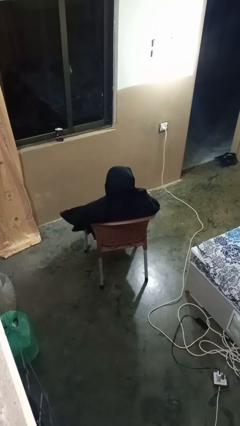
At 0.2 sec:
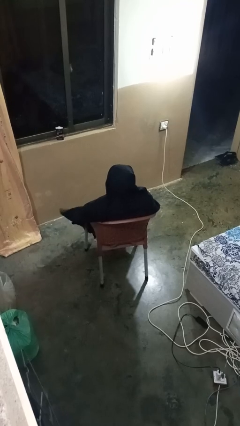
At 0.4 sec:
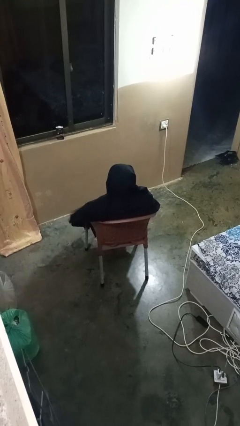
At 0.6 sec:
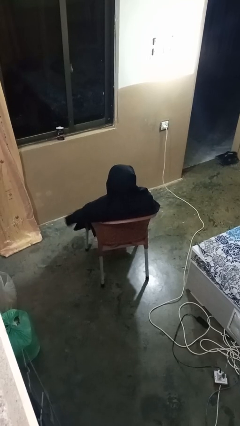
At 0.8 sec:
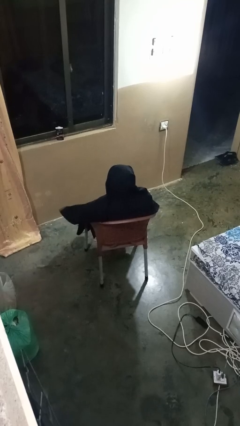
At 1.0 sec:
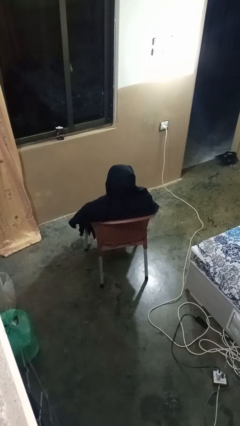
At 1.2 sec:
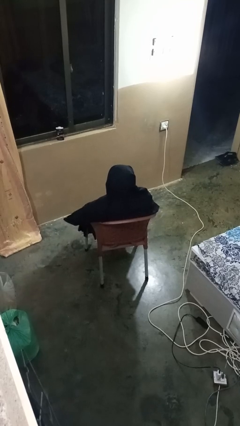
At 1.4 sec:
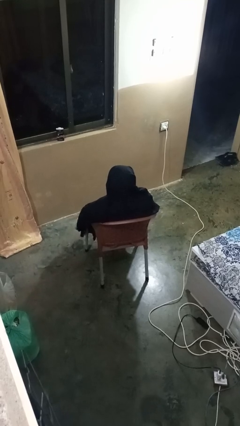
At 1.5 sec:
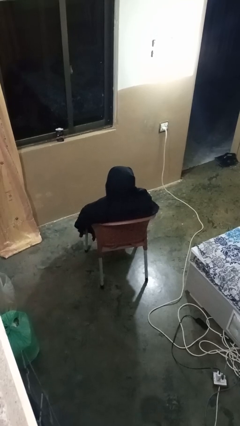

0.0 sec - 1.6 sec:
person gestures lower hand

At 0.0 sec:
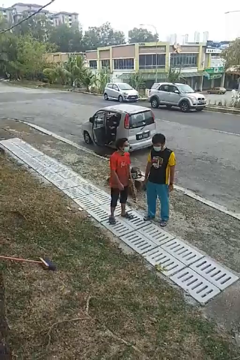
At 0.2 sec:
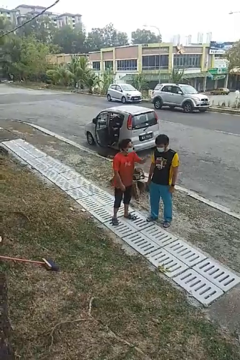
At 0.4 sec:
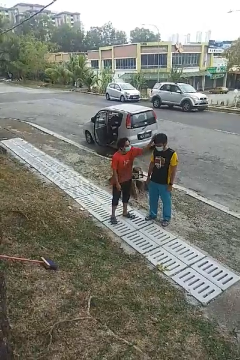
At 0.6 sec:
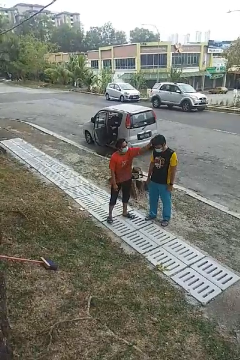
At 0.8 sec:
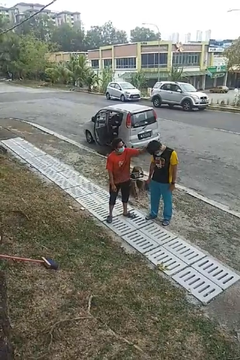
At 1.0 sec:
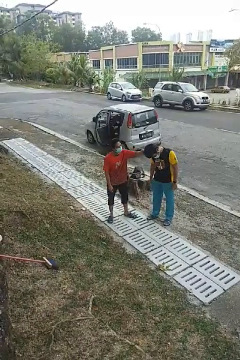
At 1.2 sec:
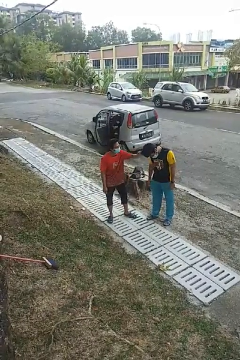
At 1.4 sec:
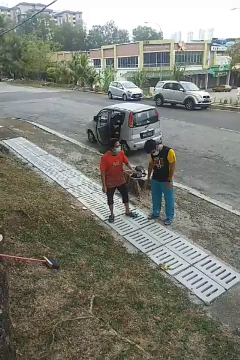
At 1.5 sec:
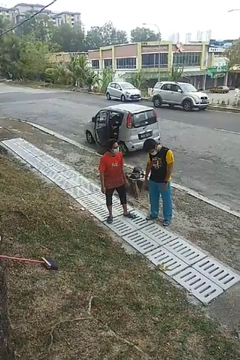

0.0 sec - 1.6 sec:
person grabs person by hair

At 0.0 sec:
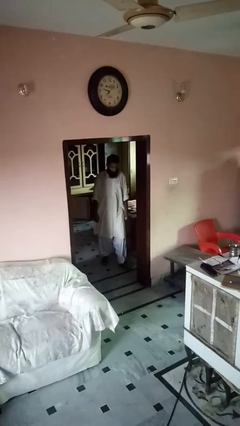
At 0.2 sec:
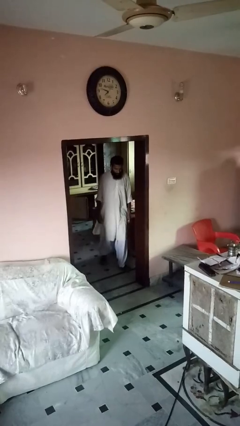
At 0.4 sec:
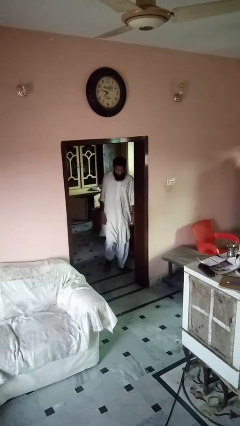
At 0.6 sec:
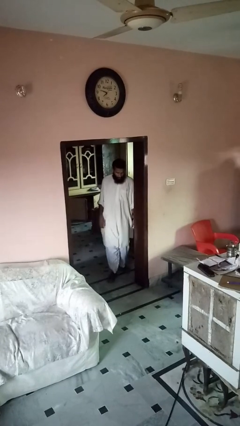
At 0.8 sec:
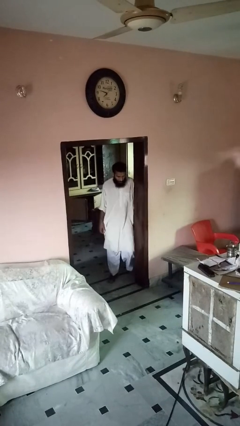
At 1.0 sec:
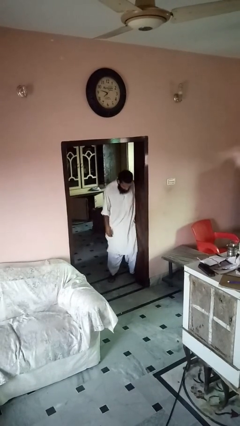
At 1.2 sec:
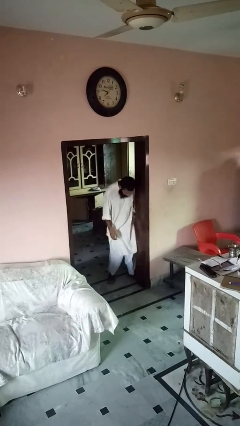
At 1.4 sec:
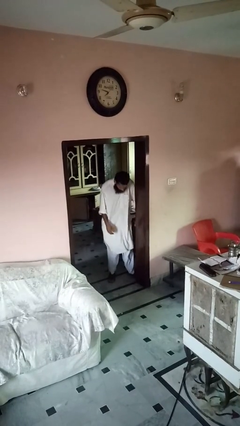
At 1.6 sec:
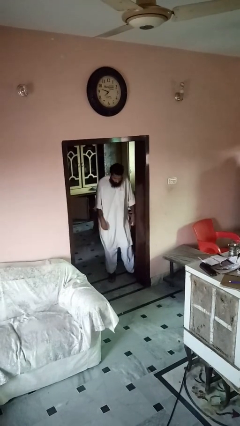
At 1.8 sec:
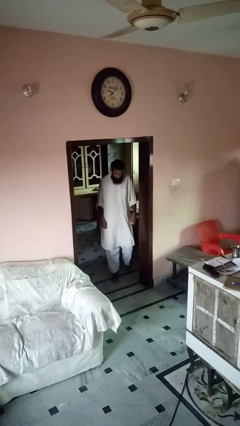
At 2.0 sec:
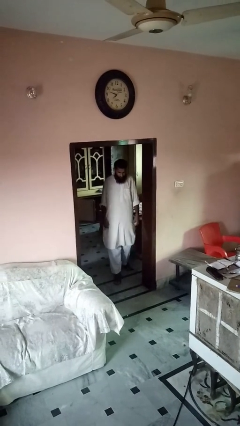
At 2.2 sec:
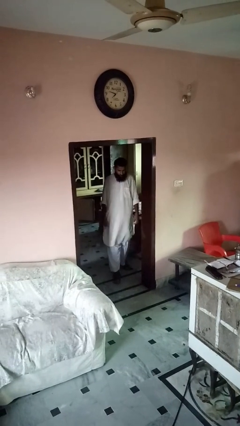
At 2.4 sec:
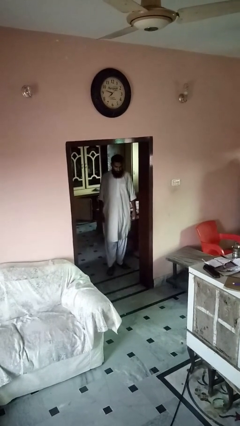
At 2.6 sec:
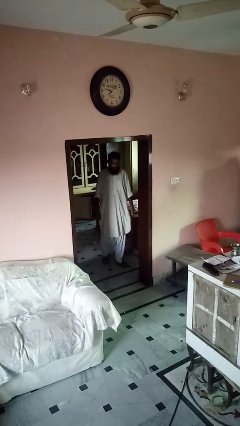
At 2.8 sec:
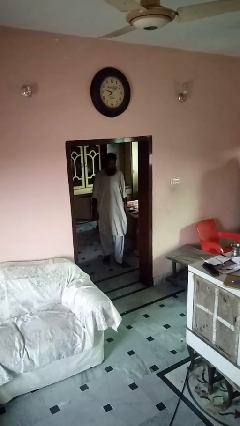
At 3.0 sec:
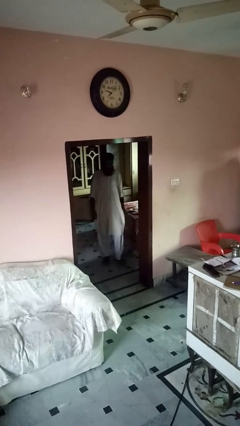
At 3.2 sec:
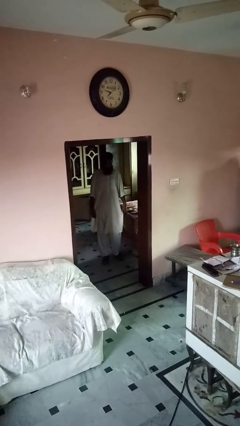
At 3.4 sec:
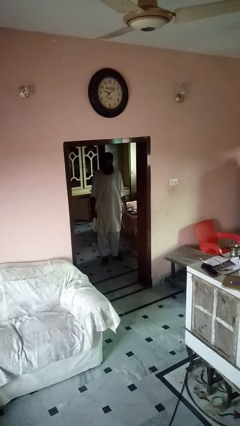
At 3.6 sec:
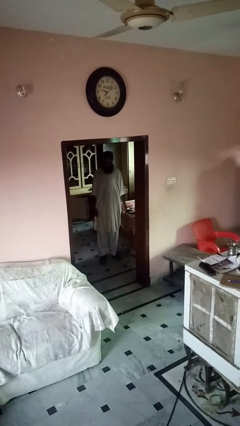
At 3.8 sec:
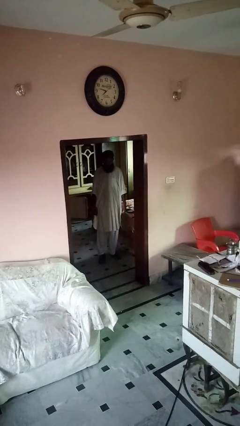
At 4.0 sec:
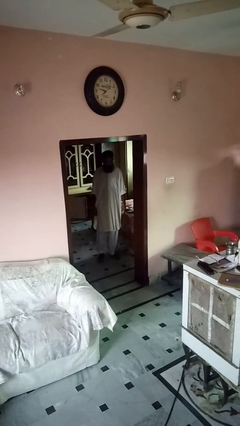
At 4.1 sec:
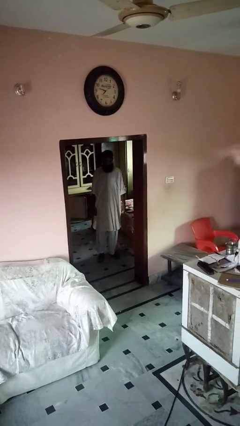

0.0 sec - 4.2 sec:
person bumps into wall

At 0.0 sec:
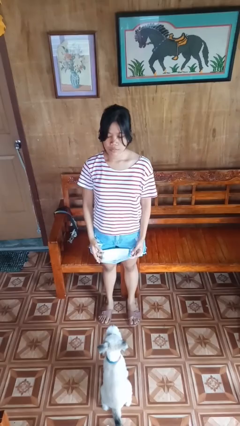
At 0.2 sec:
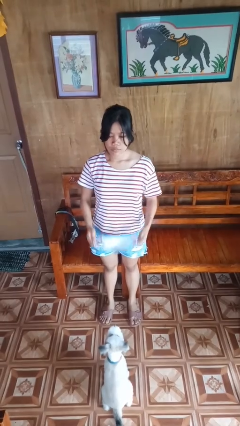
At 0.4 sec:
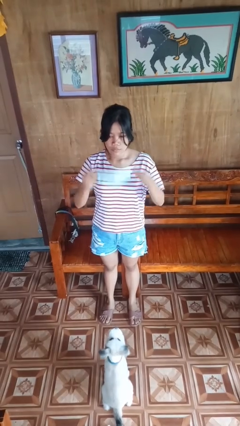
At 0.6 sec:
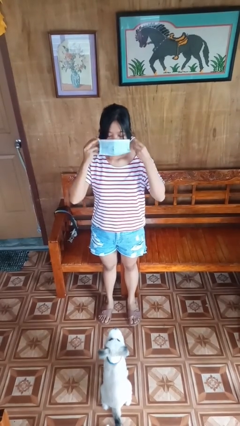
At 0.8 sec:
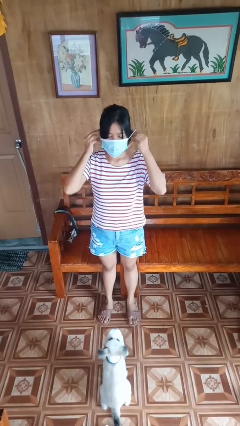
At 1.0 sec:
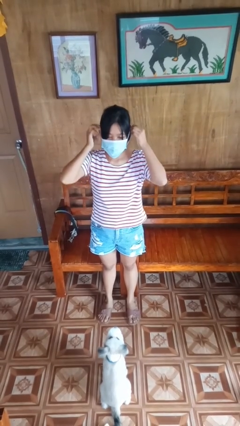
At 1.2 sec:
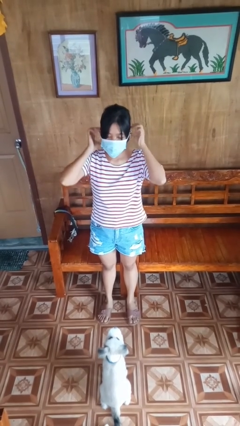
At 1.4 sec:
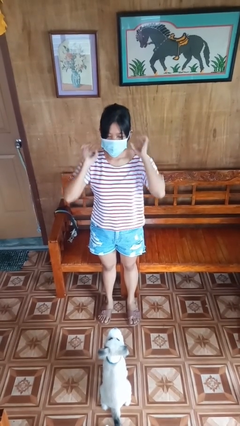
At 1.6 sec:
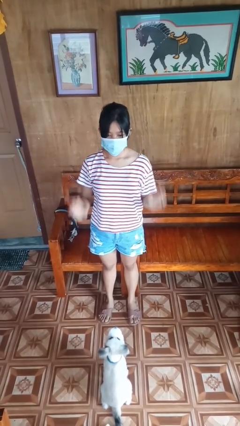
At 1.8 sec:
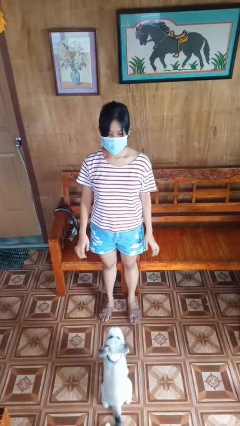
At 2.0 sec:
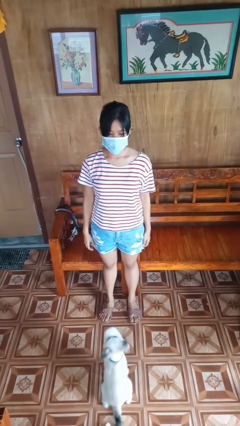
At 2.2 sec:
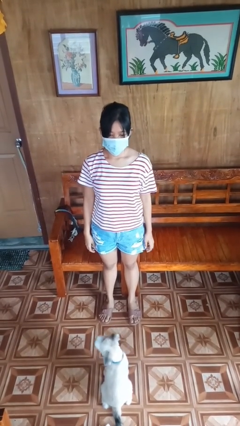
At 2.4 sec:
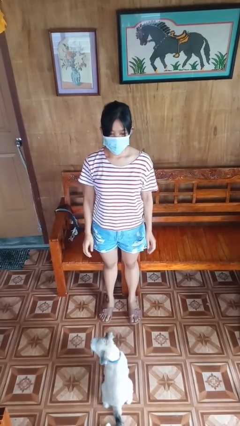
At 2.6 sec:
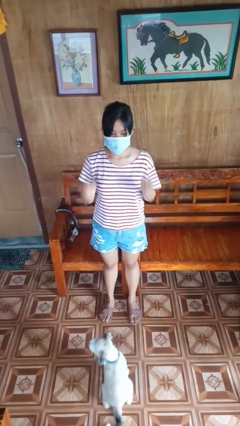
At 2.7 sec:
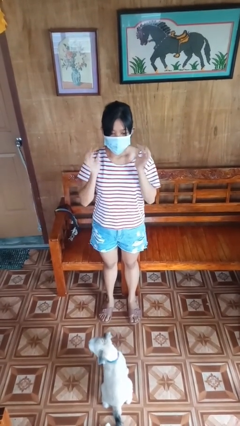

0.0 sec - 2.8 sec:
person puts on facemask

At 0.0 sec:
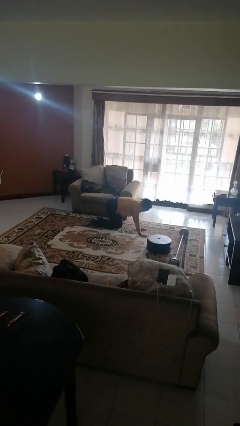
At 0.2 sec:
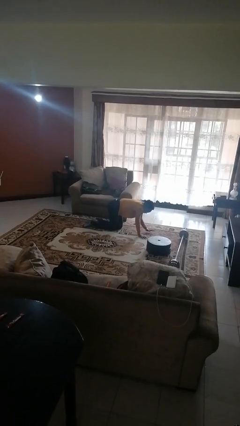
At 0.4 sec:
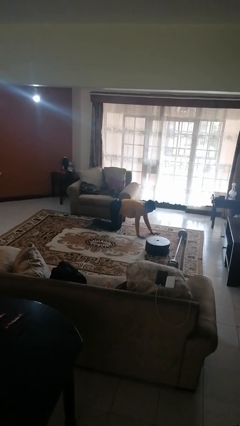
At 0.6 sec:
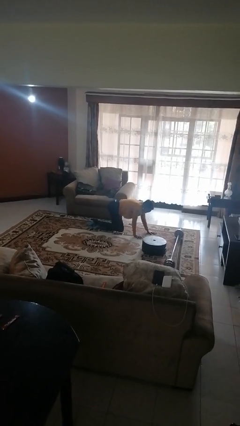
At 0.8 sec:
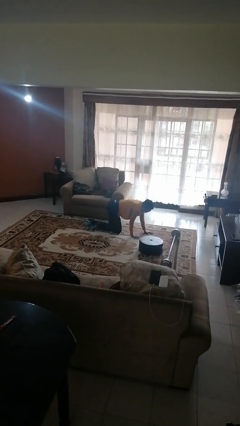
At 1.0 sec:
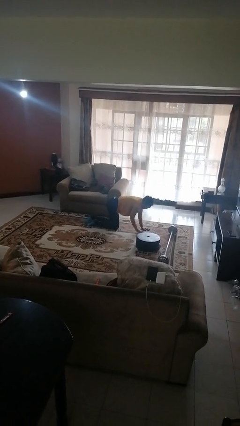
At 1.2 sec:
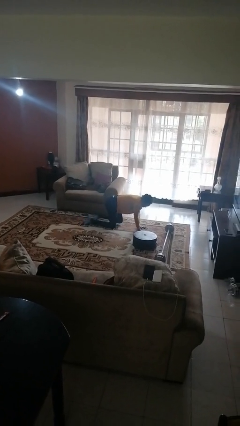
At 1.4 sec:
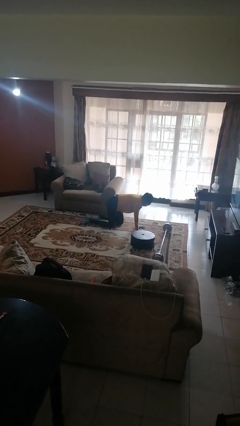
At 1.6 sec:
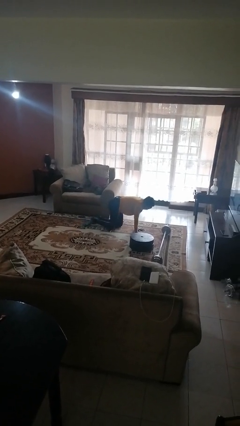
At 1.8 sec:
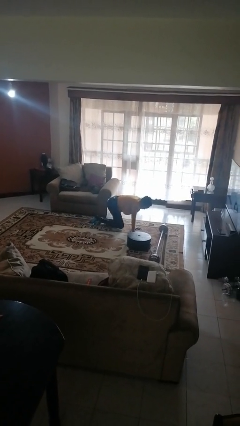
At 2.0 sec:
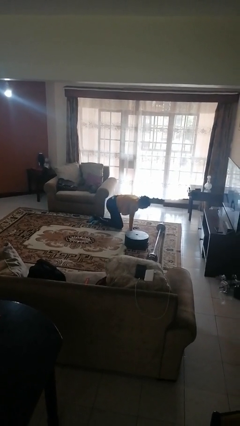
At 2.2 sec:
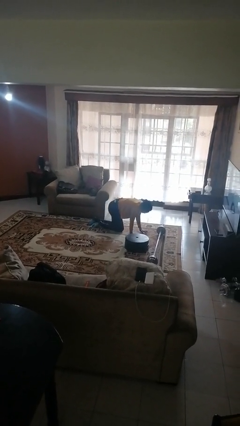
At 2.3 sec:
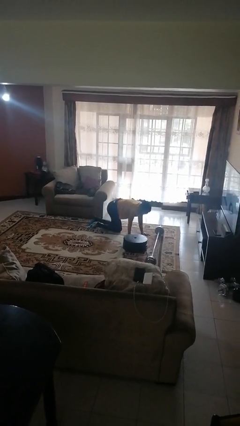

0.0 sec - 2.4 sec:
person crawls

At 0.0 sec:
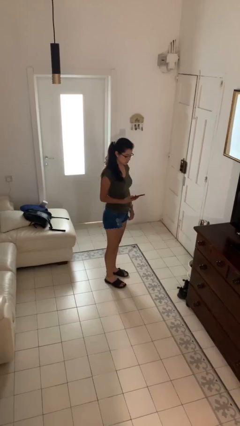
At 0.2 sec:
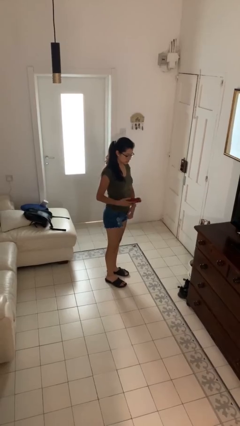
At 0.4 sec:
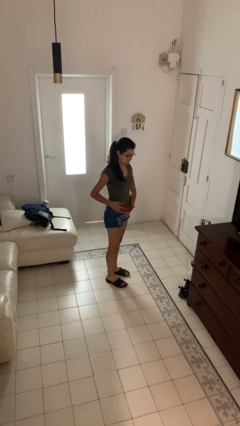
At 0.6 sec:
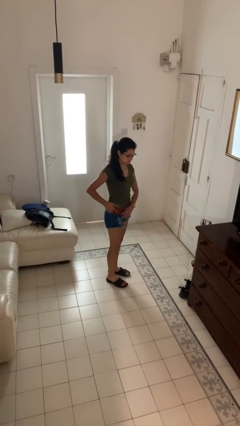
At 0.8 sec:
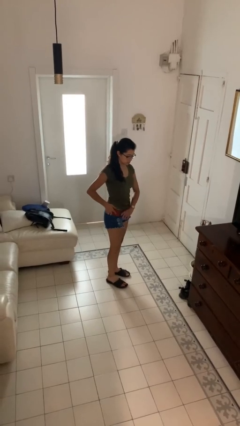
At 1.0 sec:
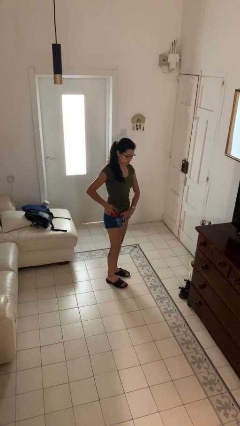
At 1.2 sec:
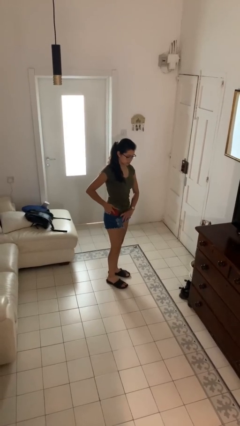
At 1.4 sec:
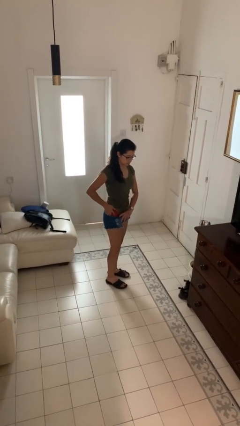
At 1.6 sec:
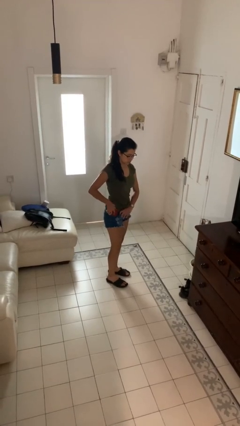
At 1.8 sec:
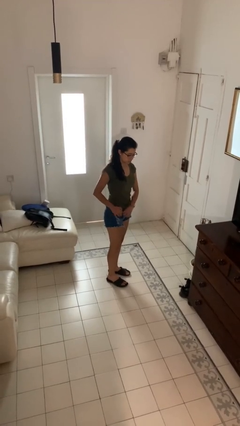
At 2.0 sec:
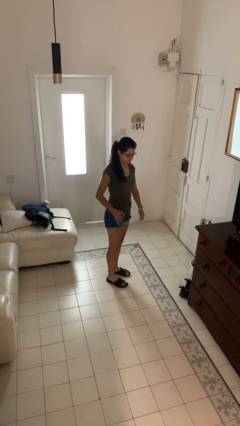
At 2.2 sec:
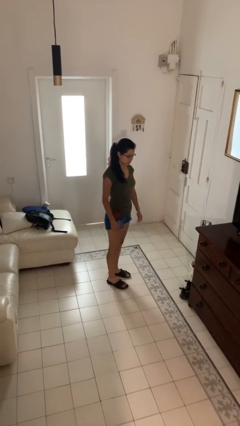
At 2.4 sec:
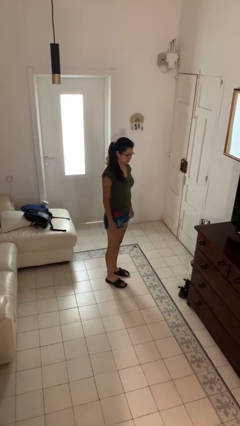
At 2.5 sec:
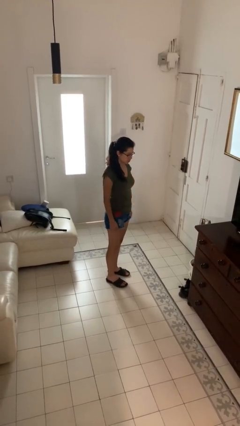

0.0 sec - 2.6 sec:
person puts phone into pocket

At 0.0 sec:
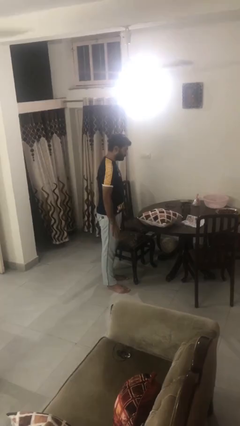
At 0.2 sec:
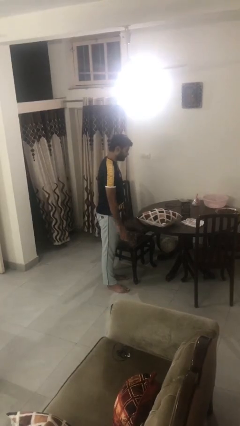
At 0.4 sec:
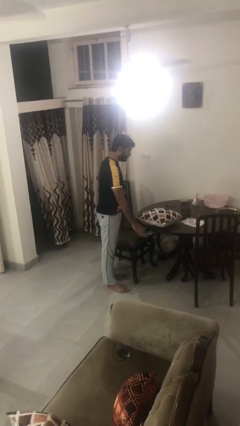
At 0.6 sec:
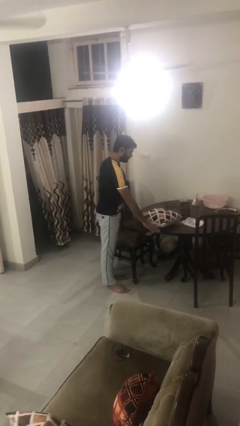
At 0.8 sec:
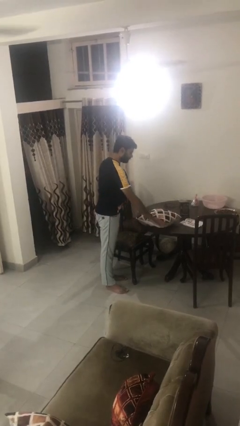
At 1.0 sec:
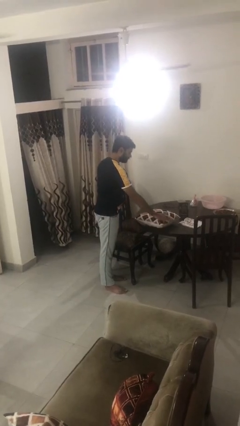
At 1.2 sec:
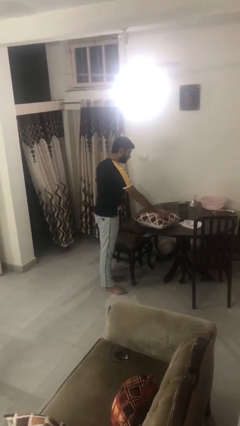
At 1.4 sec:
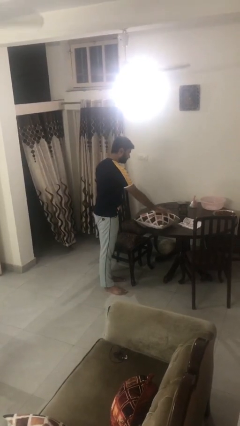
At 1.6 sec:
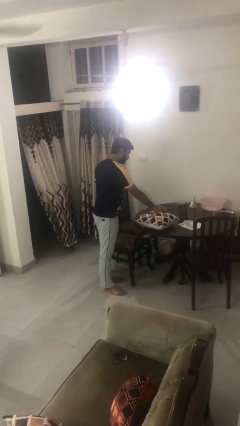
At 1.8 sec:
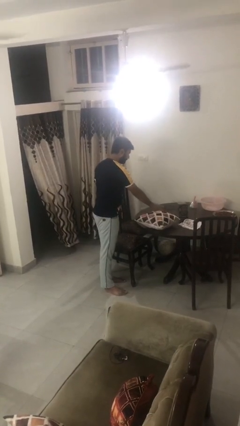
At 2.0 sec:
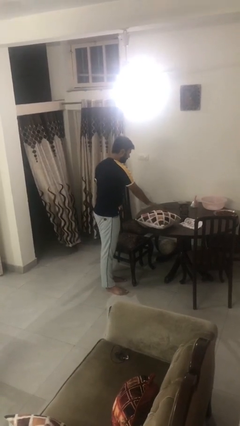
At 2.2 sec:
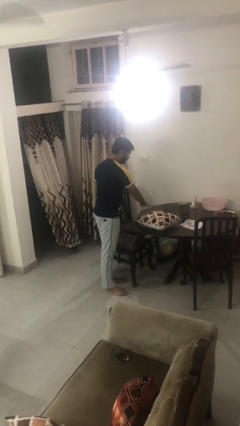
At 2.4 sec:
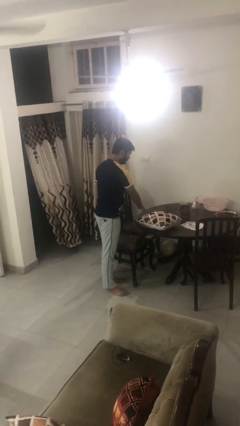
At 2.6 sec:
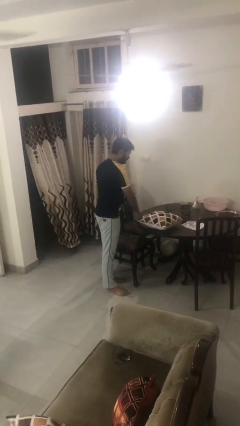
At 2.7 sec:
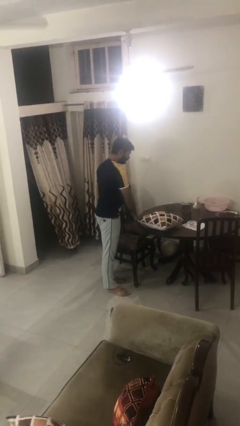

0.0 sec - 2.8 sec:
person waves hand over object
